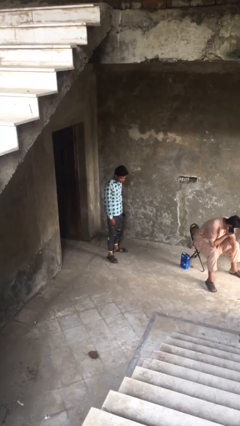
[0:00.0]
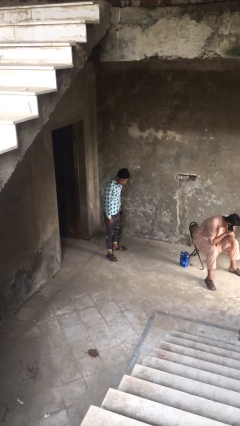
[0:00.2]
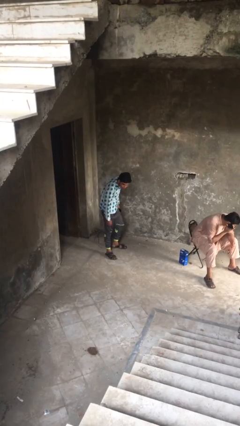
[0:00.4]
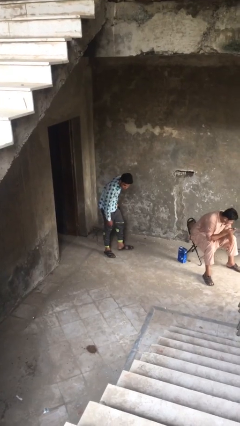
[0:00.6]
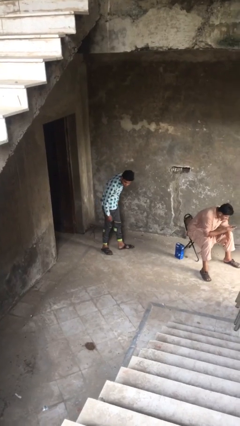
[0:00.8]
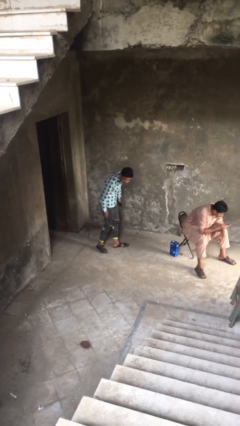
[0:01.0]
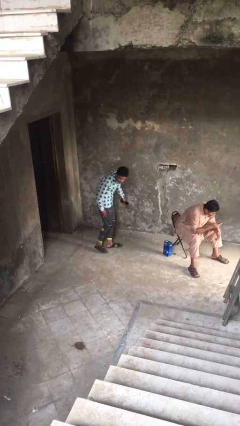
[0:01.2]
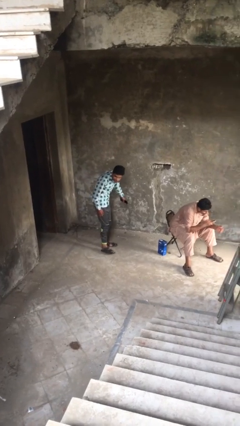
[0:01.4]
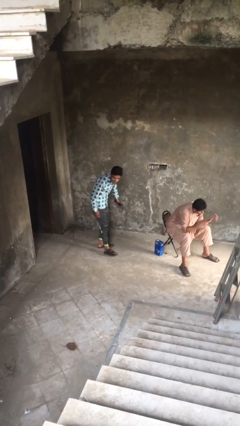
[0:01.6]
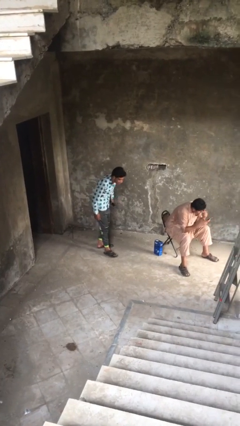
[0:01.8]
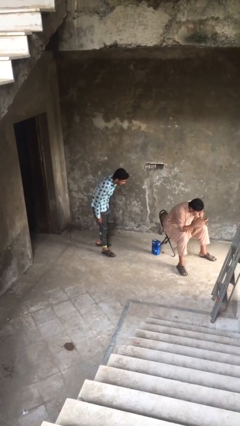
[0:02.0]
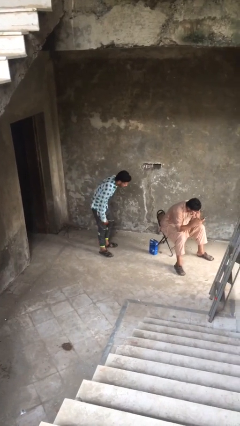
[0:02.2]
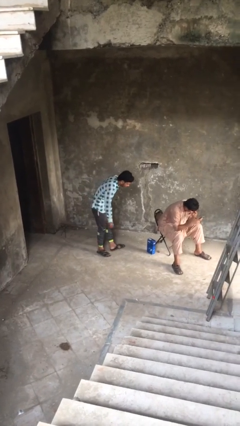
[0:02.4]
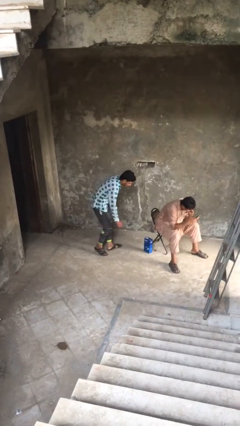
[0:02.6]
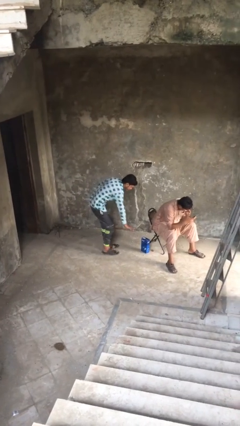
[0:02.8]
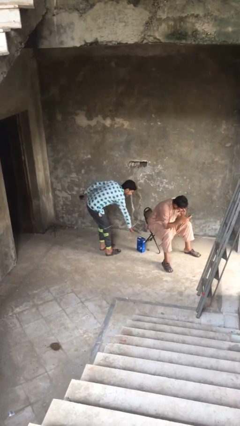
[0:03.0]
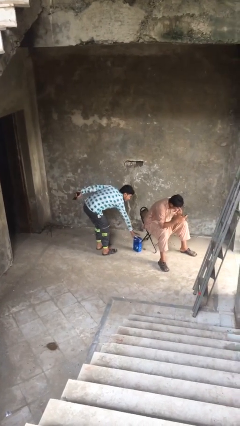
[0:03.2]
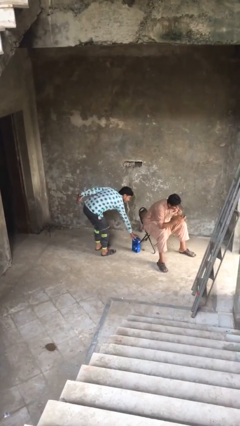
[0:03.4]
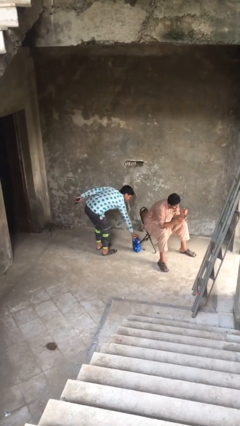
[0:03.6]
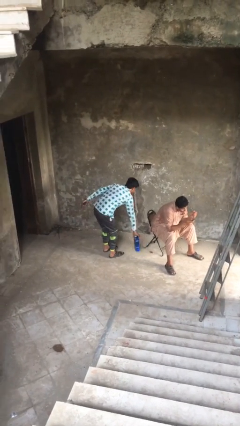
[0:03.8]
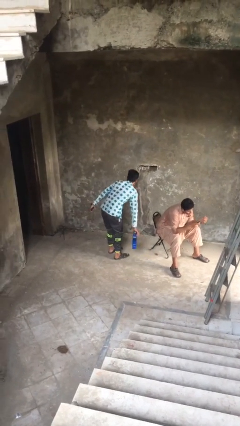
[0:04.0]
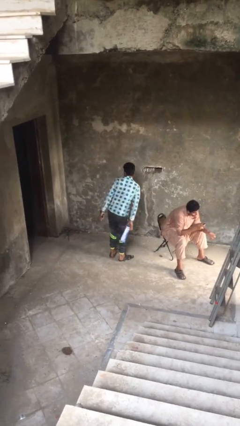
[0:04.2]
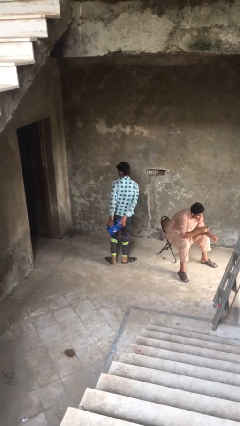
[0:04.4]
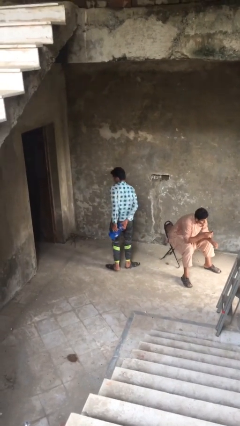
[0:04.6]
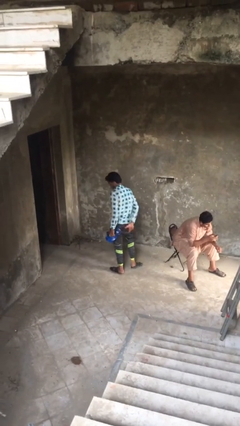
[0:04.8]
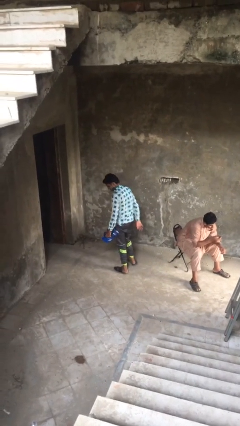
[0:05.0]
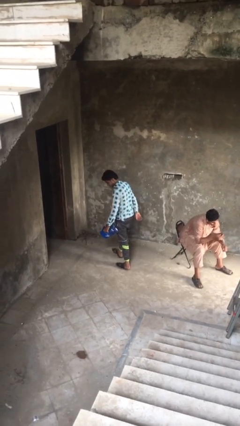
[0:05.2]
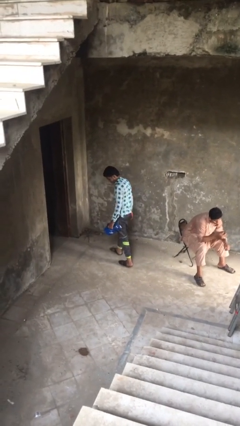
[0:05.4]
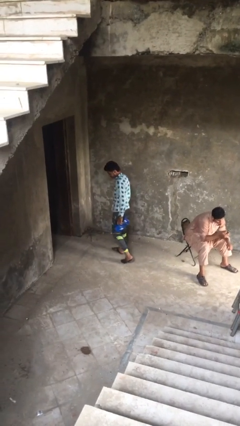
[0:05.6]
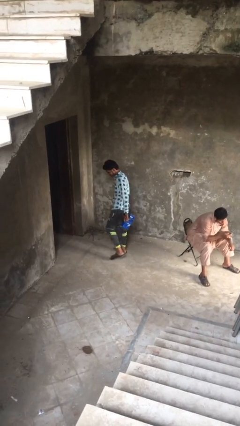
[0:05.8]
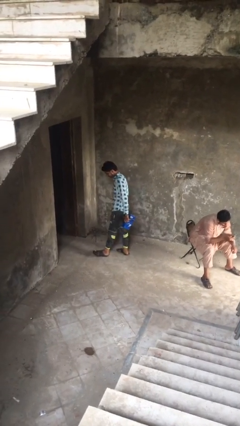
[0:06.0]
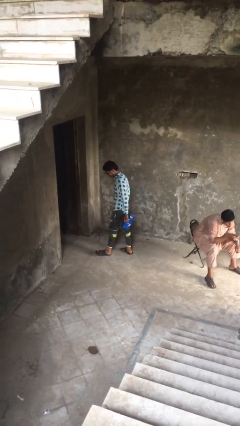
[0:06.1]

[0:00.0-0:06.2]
person steals object from person

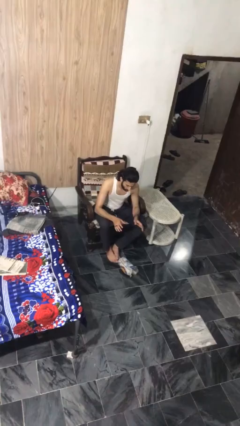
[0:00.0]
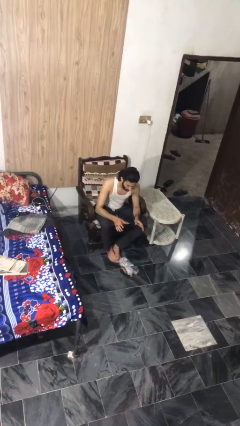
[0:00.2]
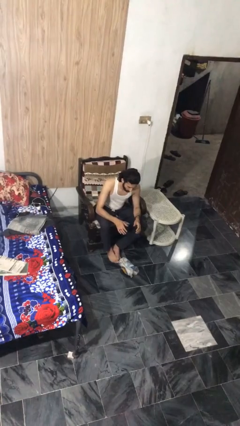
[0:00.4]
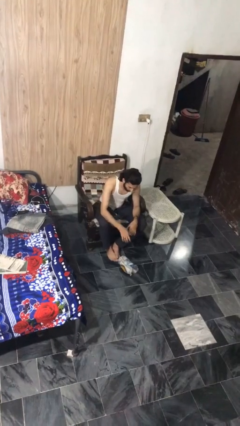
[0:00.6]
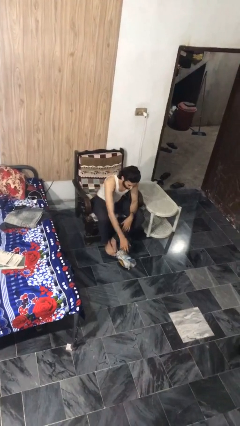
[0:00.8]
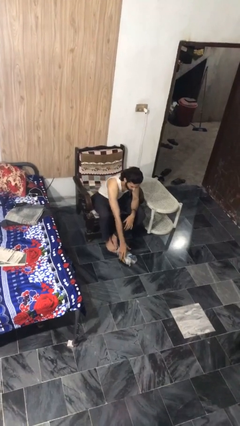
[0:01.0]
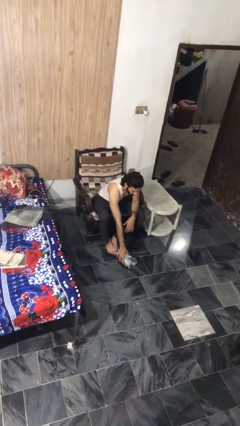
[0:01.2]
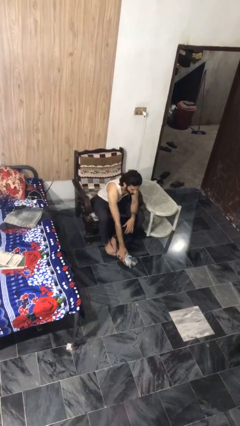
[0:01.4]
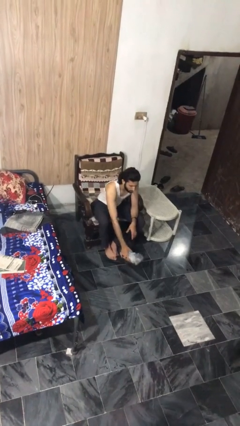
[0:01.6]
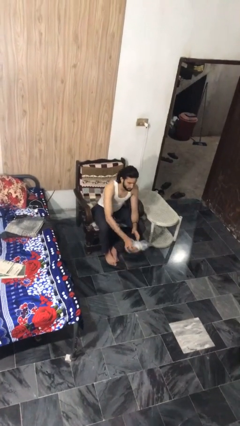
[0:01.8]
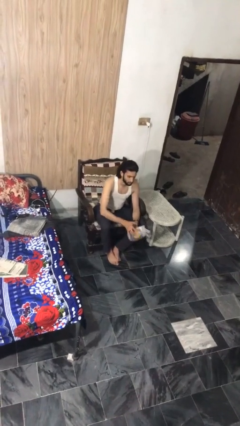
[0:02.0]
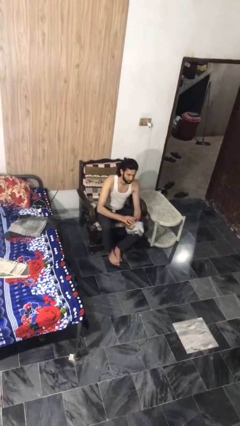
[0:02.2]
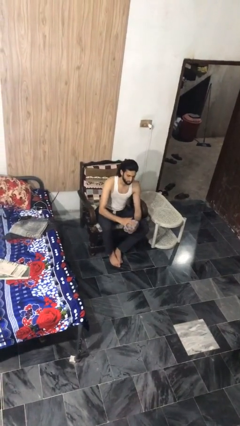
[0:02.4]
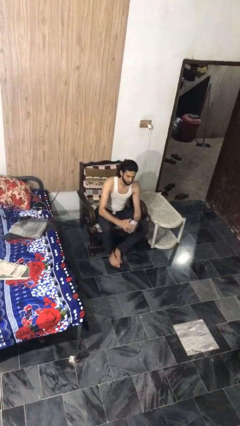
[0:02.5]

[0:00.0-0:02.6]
person picks up object from floor

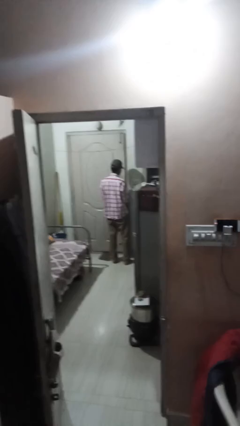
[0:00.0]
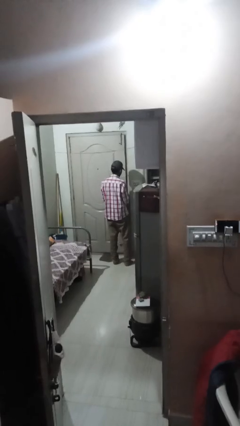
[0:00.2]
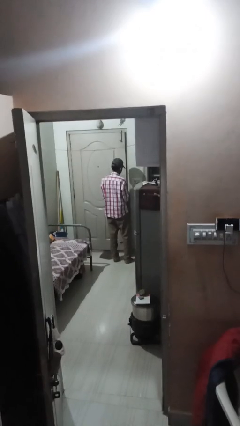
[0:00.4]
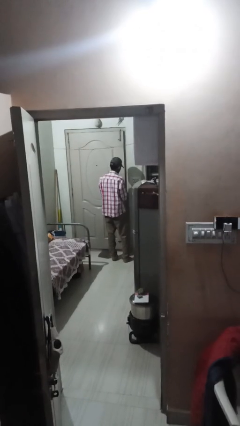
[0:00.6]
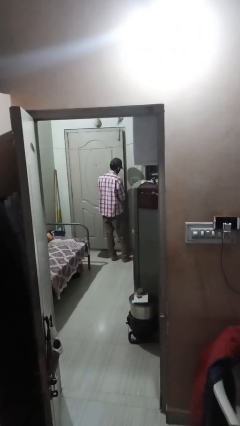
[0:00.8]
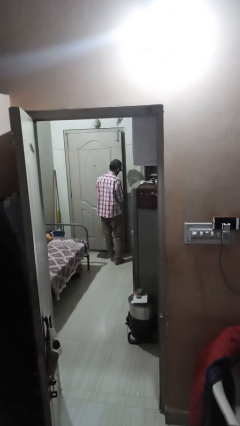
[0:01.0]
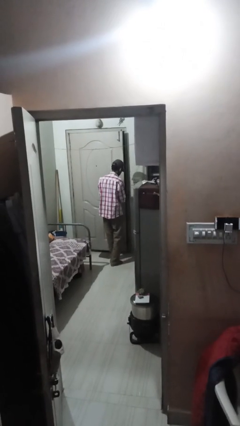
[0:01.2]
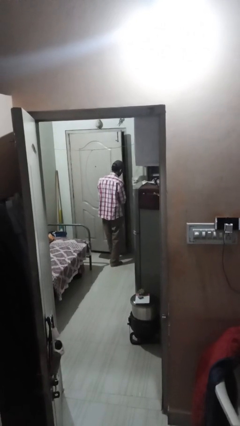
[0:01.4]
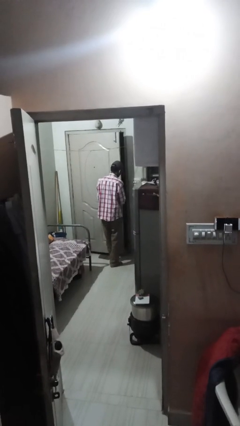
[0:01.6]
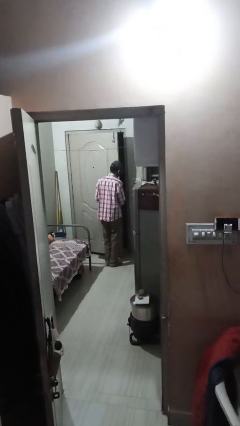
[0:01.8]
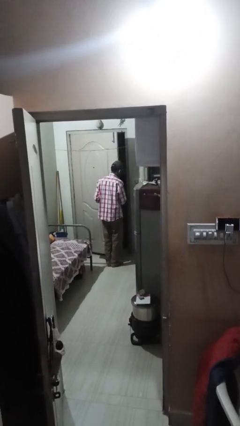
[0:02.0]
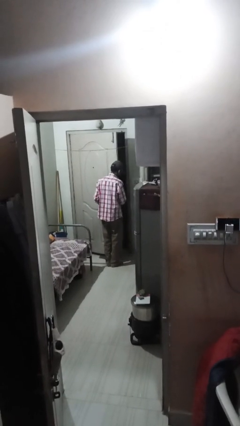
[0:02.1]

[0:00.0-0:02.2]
person opens facility door

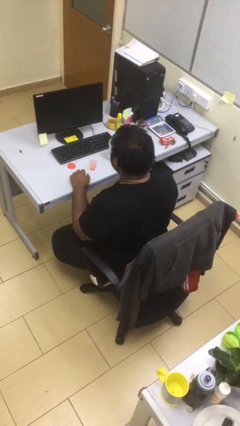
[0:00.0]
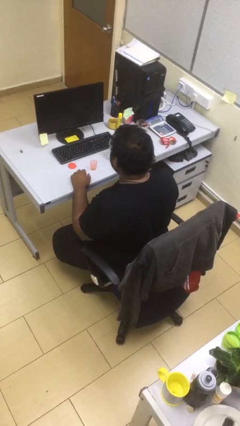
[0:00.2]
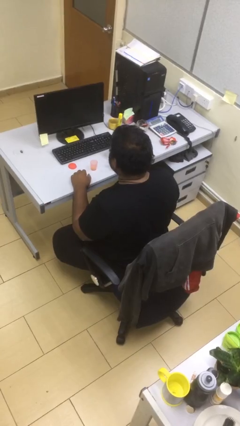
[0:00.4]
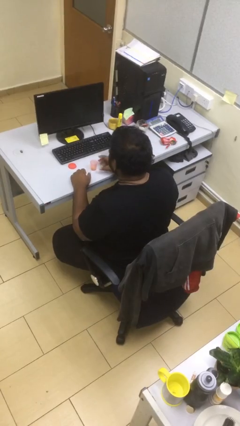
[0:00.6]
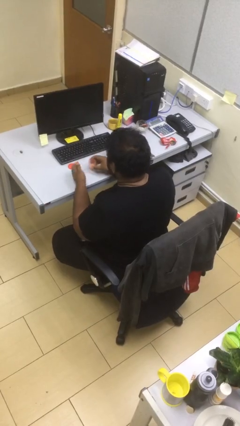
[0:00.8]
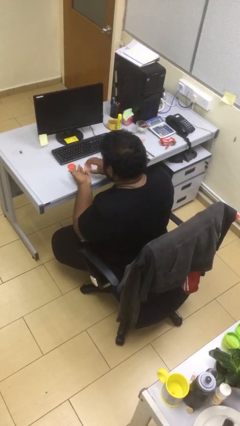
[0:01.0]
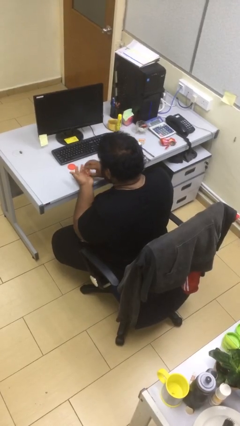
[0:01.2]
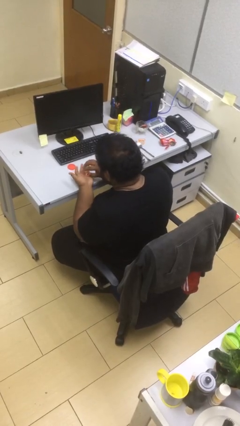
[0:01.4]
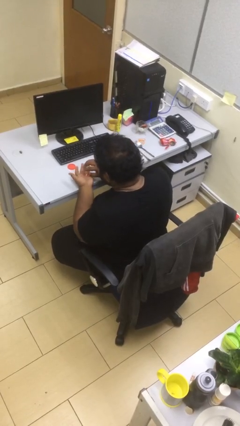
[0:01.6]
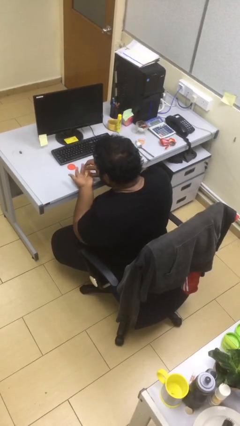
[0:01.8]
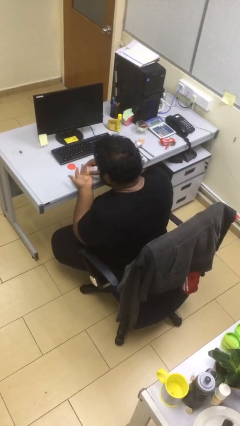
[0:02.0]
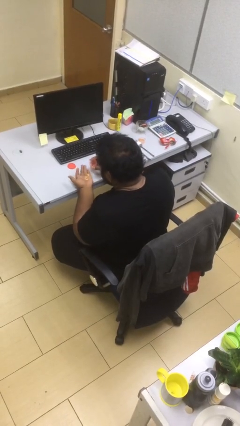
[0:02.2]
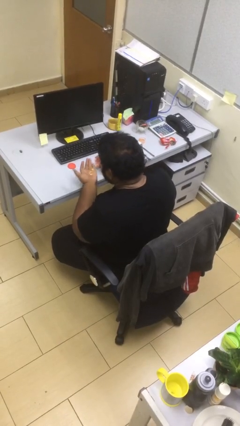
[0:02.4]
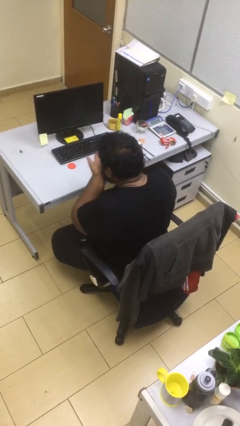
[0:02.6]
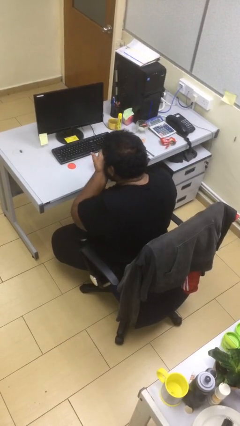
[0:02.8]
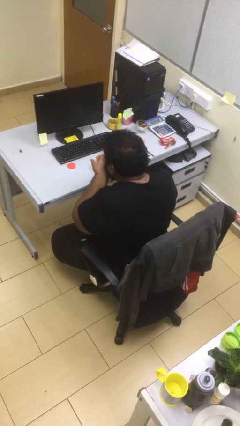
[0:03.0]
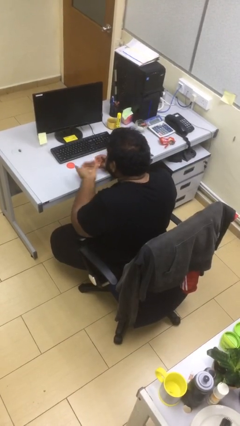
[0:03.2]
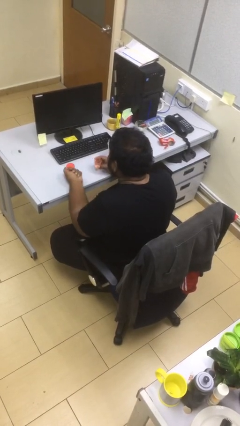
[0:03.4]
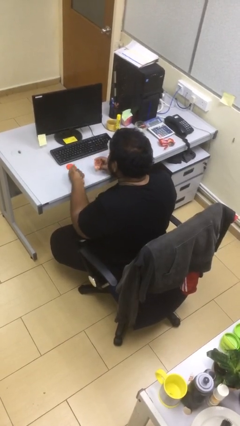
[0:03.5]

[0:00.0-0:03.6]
person takes medicine pills

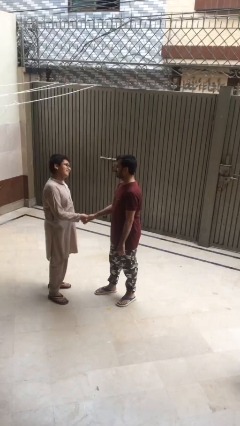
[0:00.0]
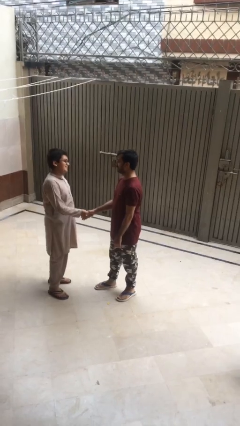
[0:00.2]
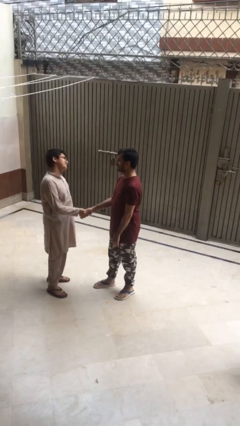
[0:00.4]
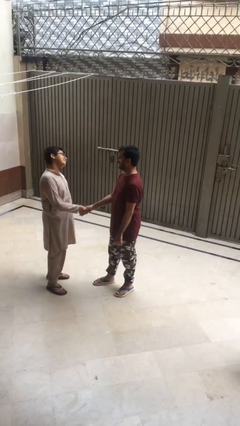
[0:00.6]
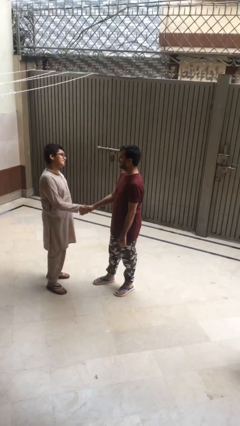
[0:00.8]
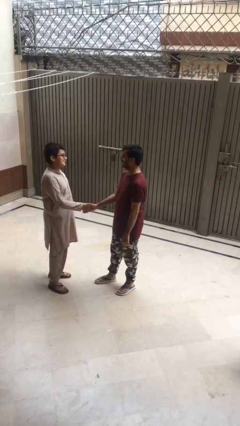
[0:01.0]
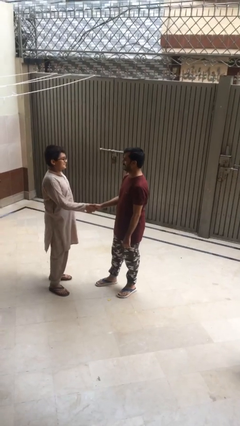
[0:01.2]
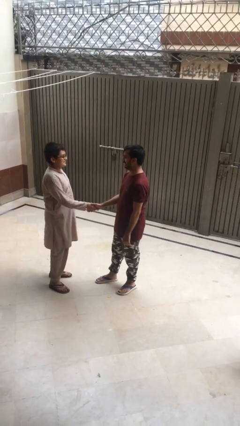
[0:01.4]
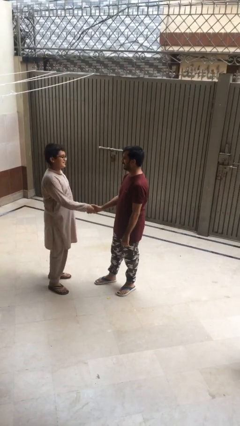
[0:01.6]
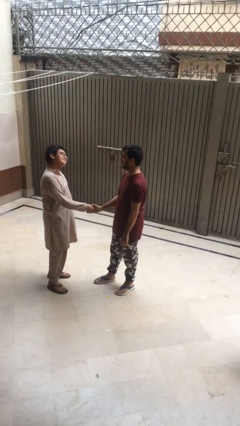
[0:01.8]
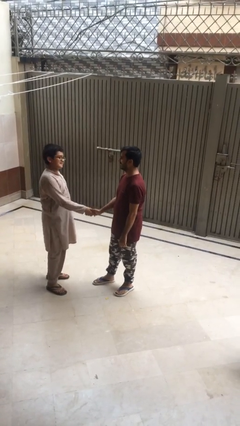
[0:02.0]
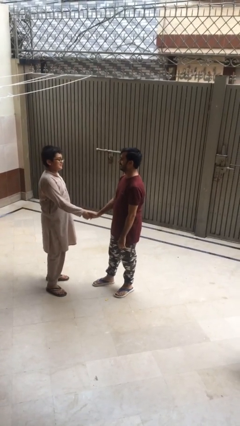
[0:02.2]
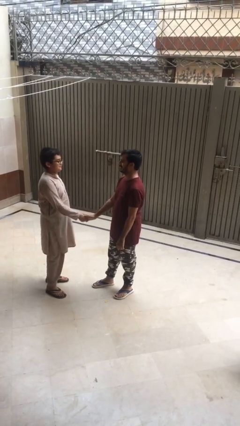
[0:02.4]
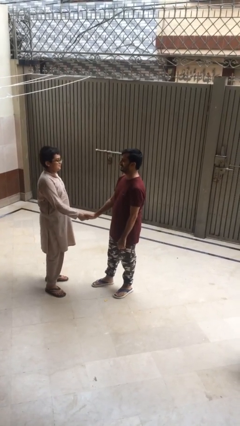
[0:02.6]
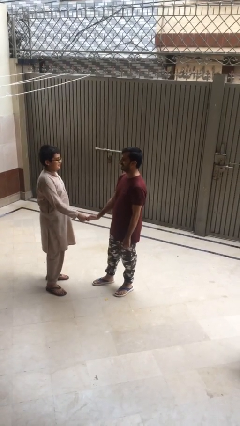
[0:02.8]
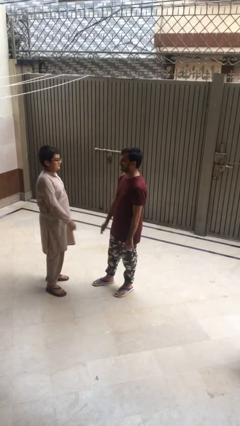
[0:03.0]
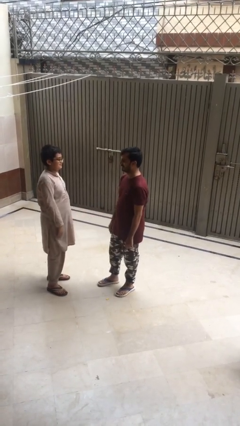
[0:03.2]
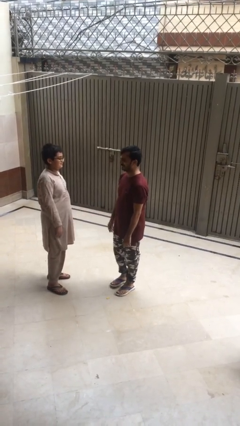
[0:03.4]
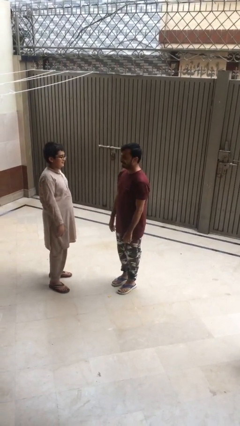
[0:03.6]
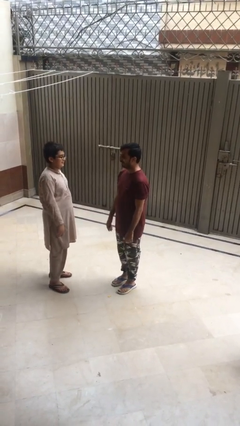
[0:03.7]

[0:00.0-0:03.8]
person talks to person
